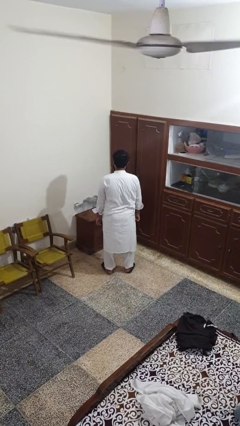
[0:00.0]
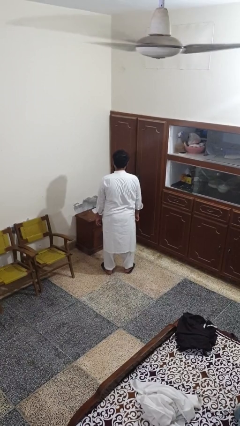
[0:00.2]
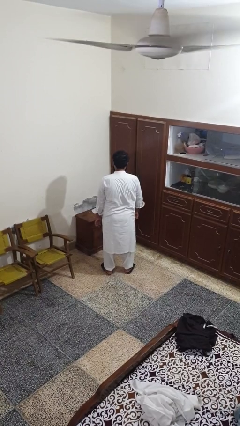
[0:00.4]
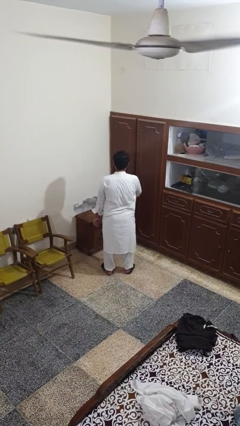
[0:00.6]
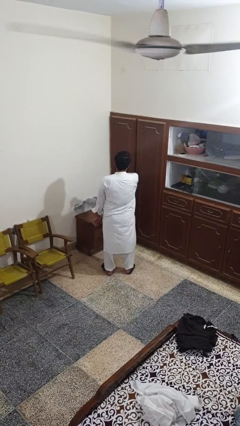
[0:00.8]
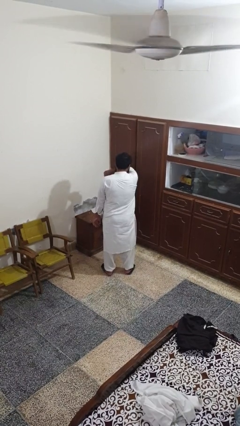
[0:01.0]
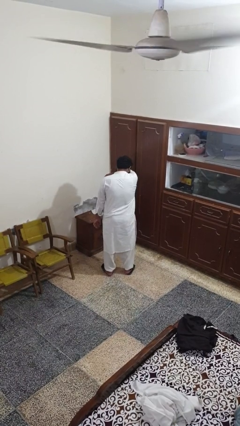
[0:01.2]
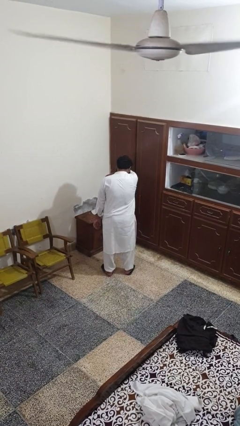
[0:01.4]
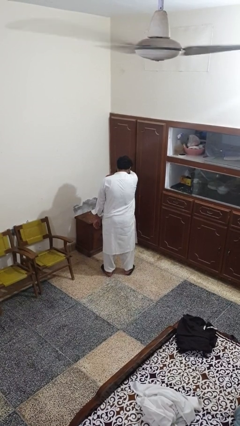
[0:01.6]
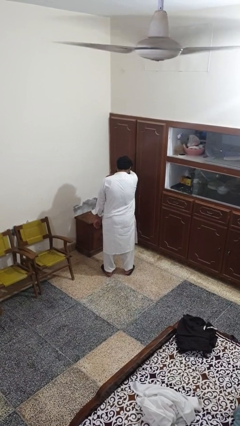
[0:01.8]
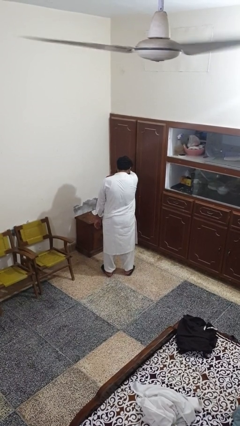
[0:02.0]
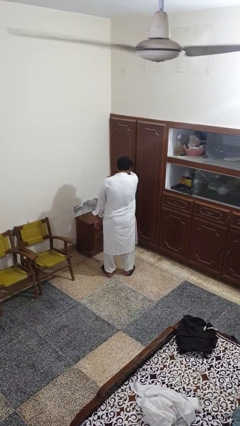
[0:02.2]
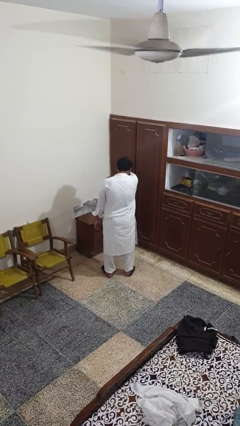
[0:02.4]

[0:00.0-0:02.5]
person sneezes into arm

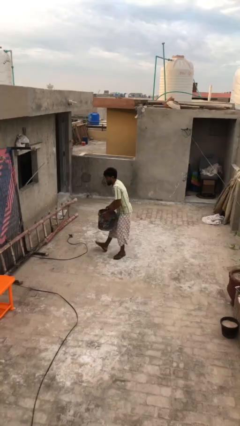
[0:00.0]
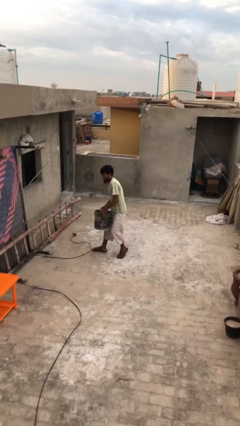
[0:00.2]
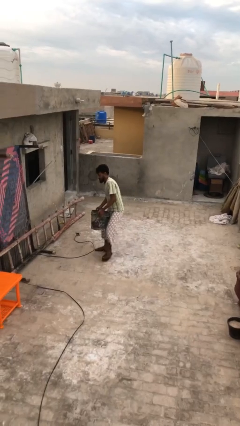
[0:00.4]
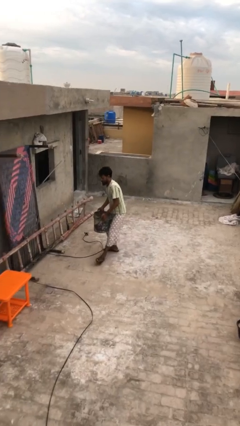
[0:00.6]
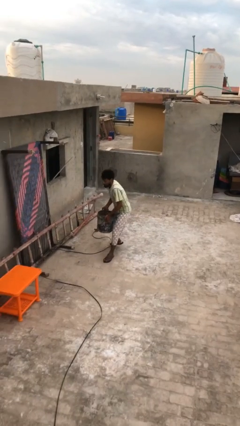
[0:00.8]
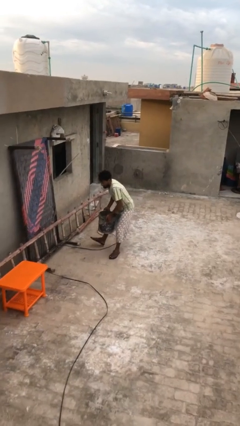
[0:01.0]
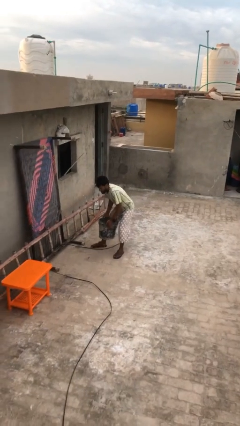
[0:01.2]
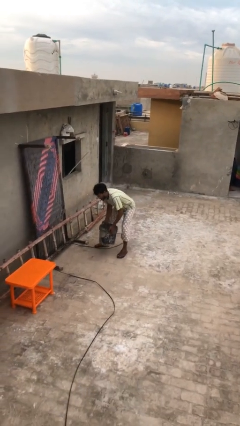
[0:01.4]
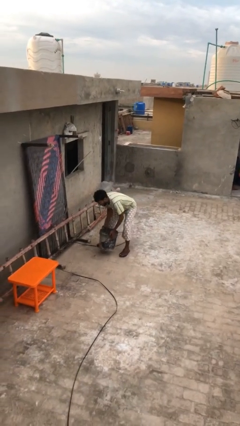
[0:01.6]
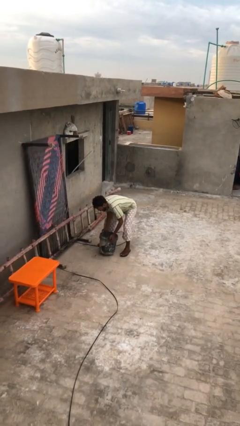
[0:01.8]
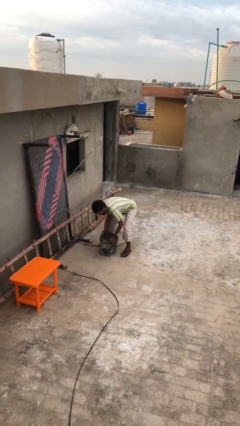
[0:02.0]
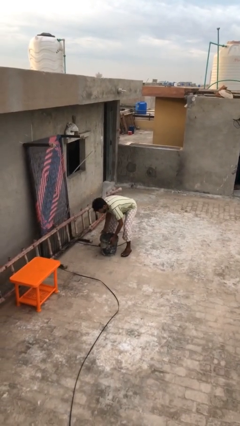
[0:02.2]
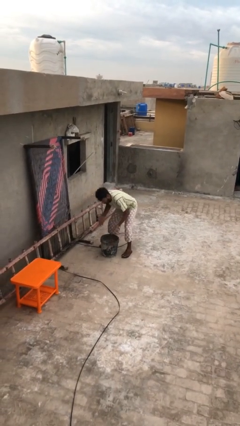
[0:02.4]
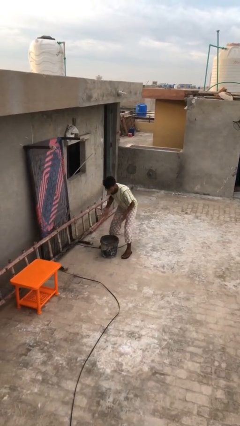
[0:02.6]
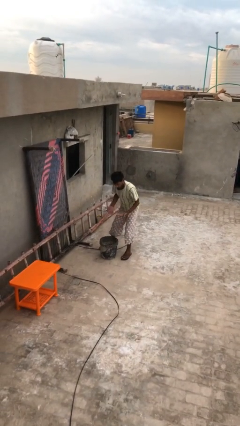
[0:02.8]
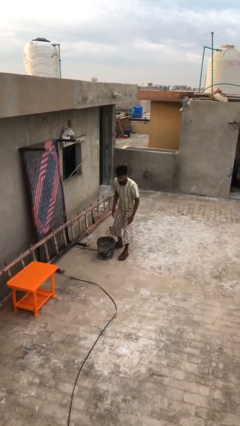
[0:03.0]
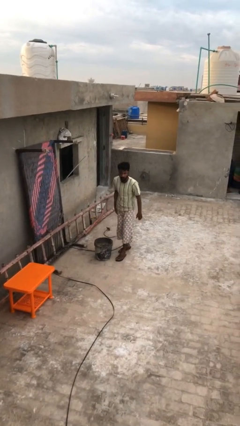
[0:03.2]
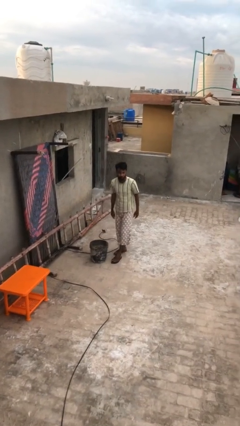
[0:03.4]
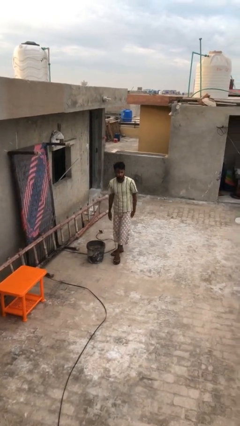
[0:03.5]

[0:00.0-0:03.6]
person puts down object on floor

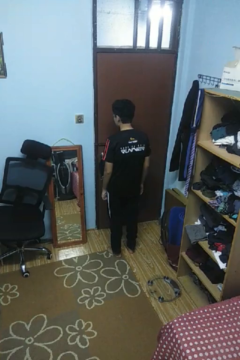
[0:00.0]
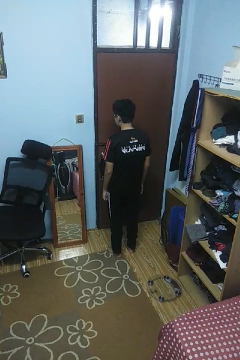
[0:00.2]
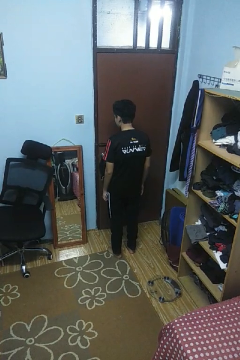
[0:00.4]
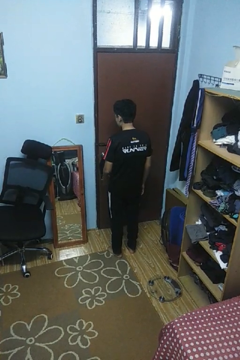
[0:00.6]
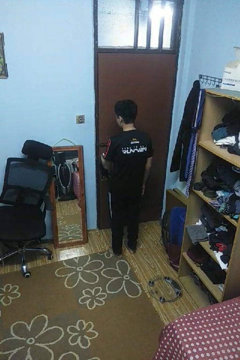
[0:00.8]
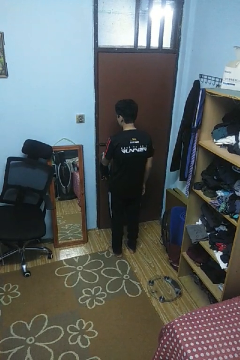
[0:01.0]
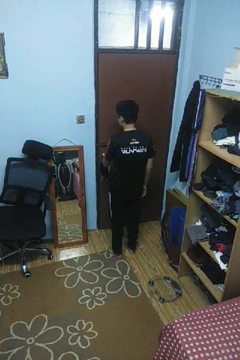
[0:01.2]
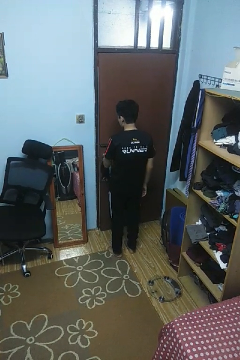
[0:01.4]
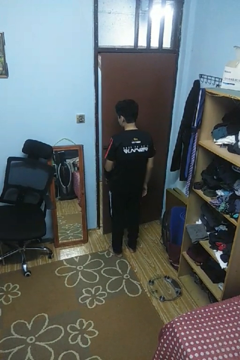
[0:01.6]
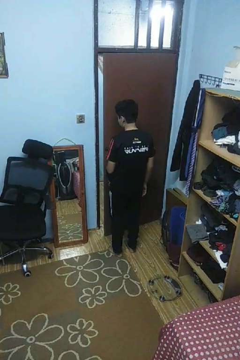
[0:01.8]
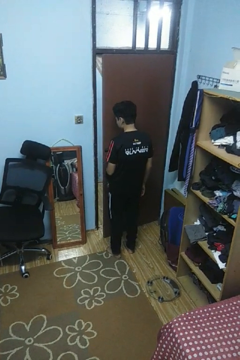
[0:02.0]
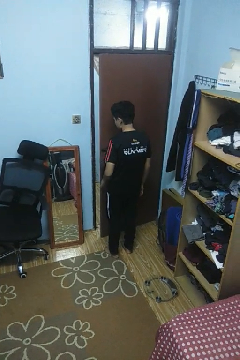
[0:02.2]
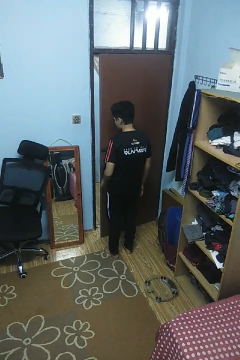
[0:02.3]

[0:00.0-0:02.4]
person opens facility door

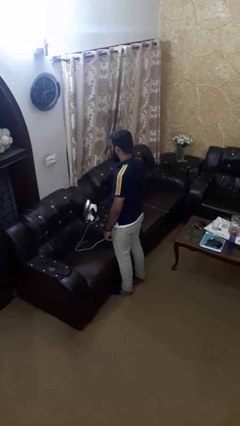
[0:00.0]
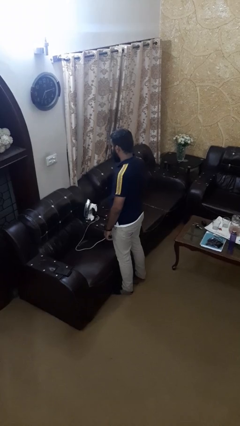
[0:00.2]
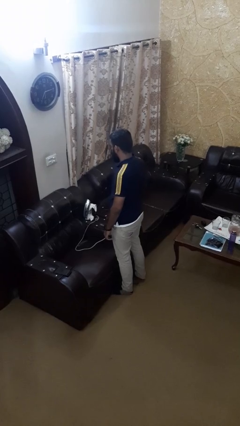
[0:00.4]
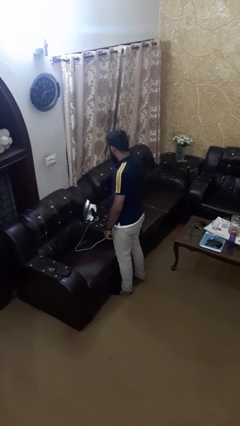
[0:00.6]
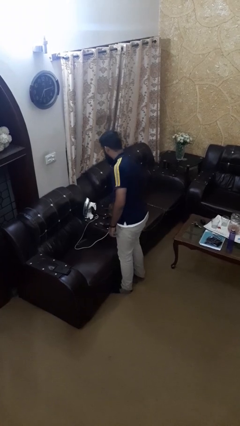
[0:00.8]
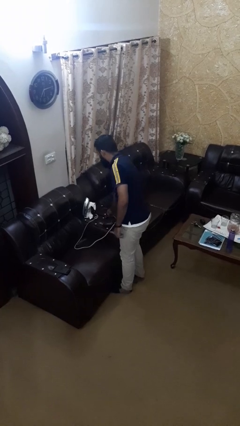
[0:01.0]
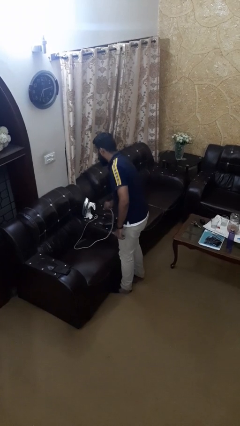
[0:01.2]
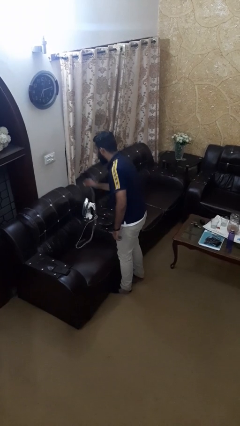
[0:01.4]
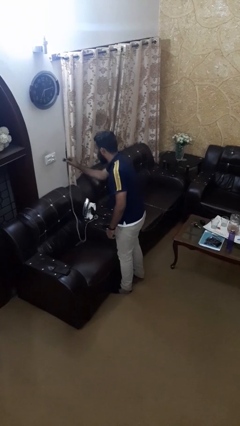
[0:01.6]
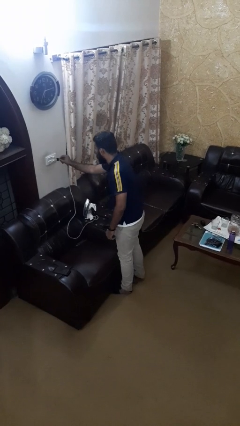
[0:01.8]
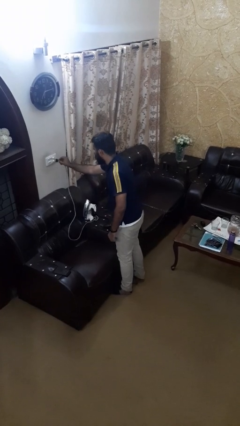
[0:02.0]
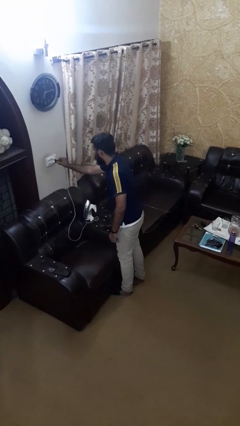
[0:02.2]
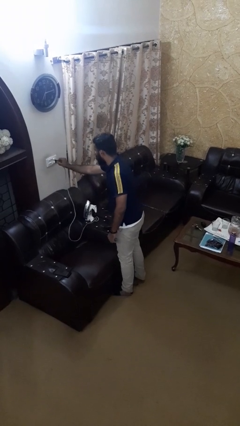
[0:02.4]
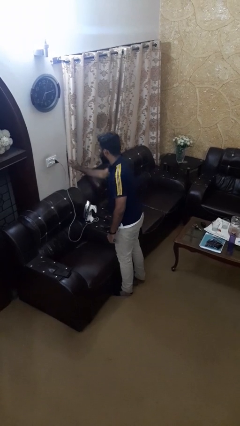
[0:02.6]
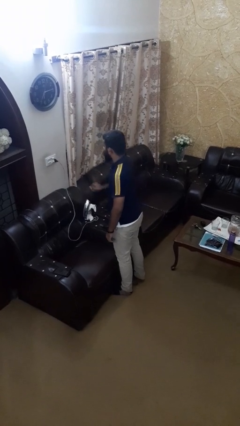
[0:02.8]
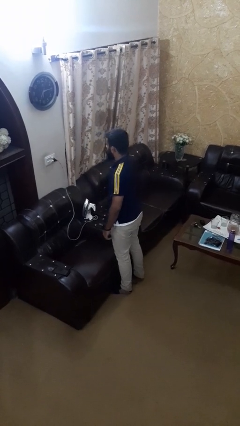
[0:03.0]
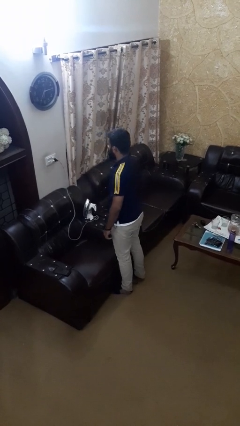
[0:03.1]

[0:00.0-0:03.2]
person plugs into electrical socket

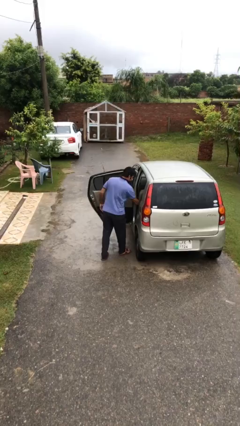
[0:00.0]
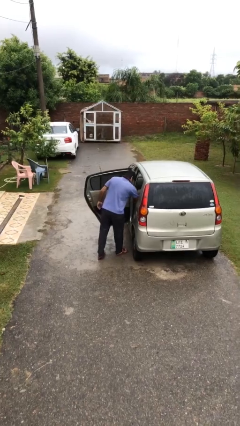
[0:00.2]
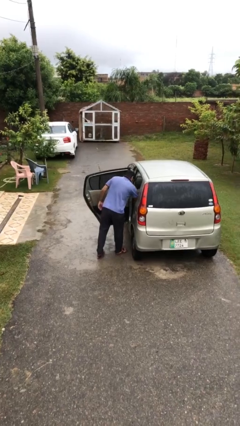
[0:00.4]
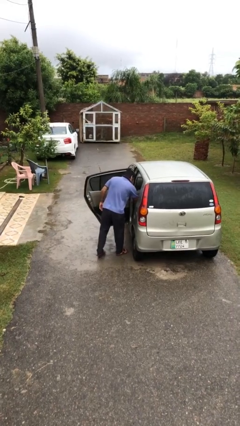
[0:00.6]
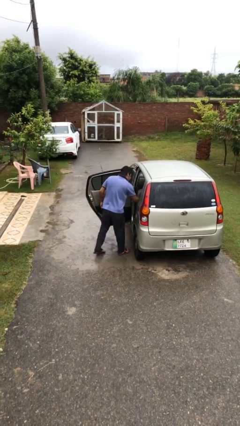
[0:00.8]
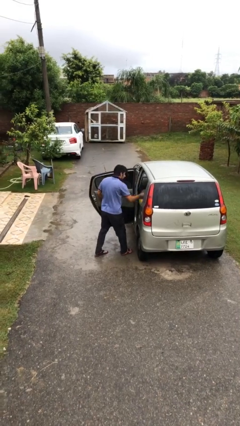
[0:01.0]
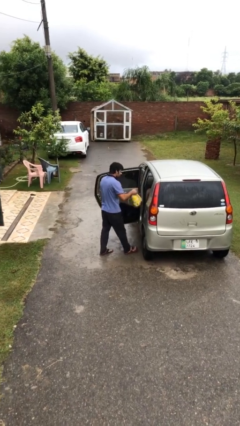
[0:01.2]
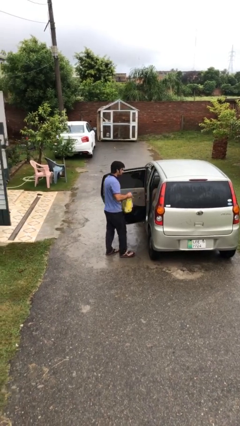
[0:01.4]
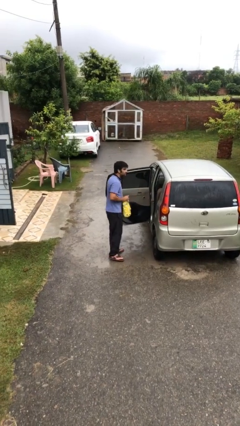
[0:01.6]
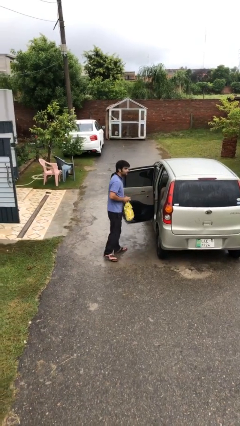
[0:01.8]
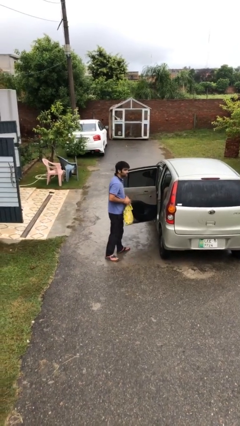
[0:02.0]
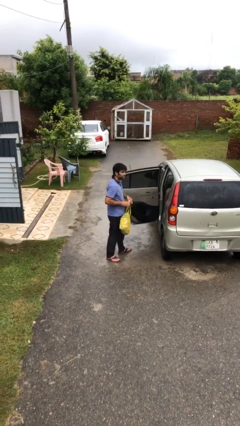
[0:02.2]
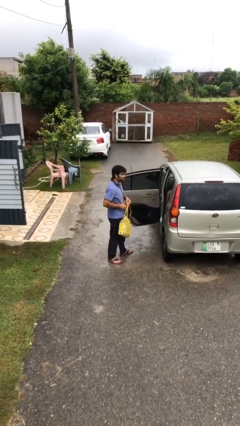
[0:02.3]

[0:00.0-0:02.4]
person unloads car

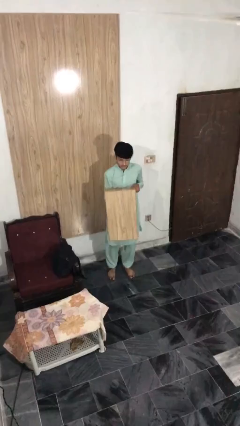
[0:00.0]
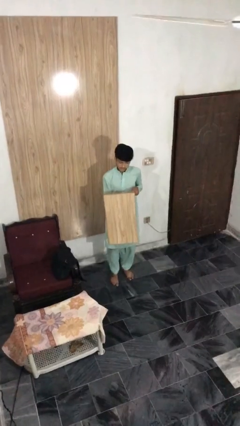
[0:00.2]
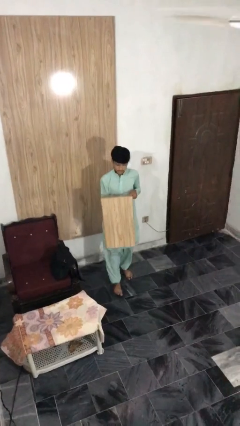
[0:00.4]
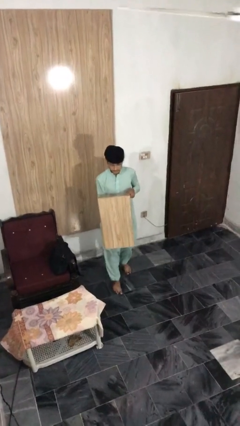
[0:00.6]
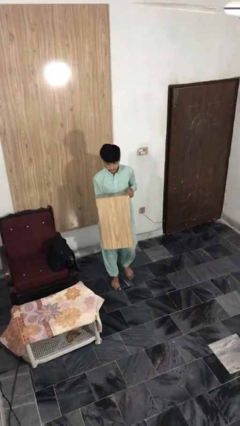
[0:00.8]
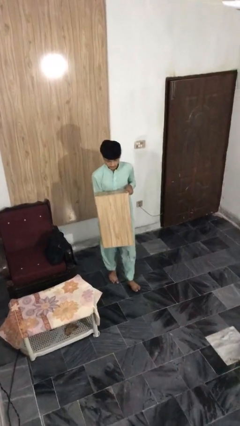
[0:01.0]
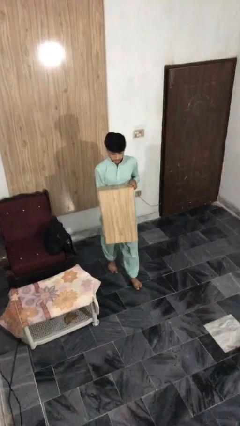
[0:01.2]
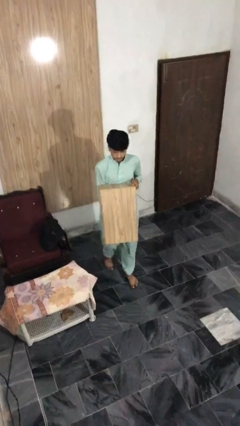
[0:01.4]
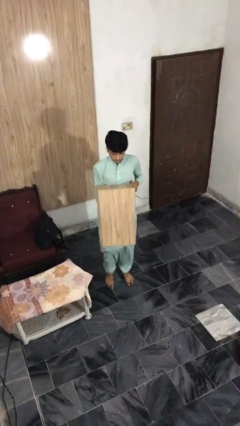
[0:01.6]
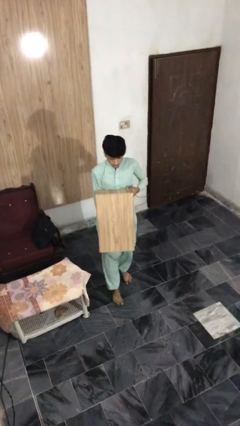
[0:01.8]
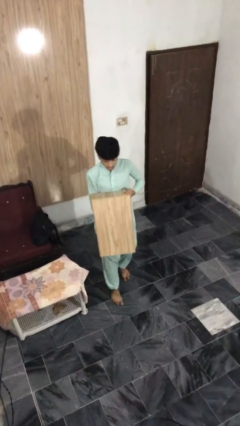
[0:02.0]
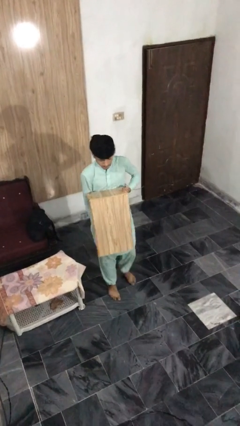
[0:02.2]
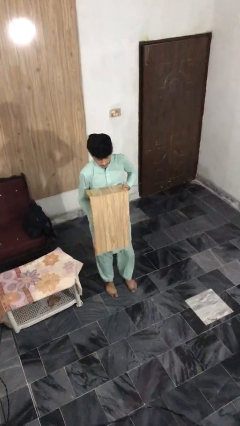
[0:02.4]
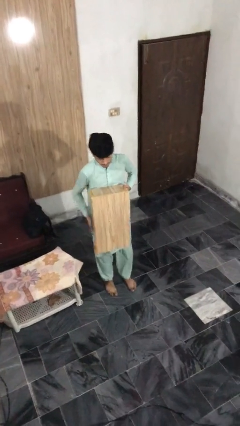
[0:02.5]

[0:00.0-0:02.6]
person carries heavy object

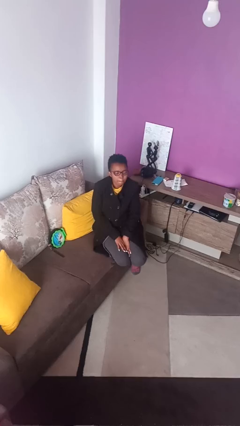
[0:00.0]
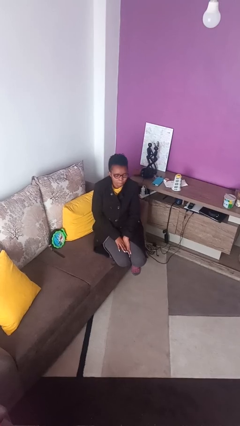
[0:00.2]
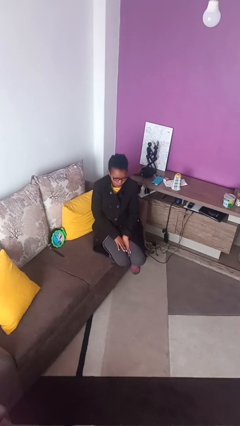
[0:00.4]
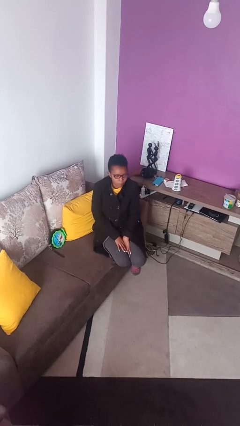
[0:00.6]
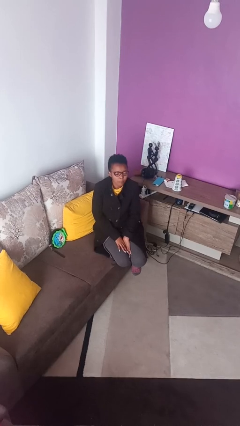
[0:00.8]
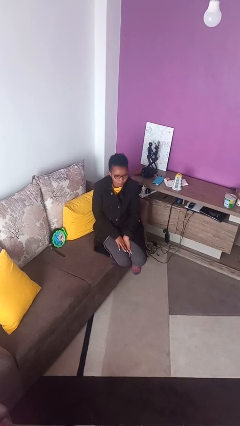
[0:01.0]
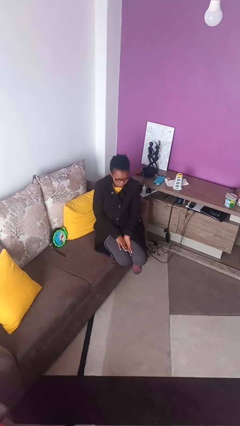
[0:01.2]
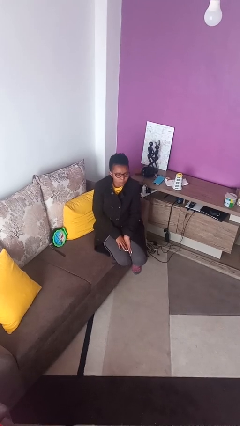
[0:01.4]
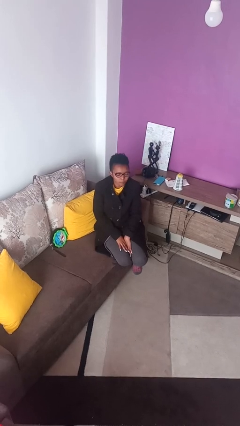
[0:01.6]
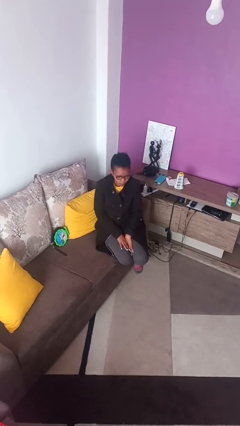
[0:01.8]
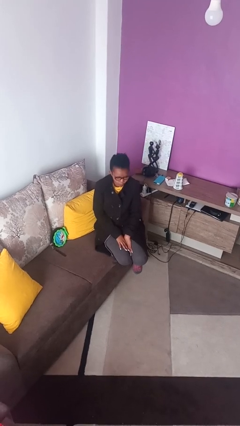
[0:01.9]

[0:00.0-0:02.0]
person nods head
